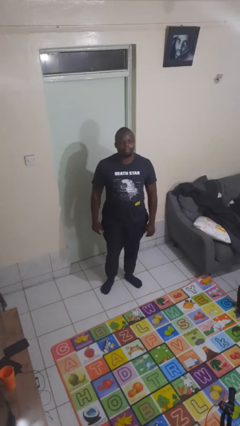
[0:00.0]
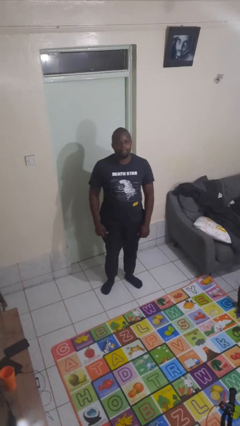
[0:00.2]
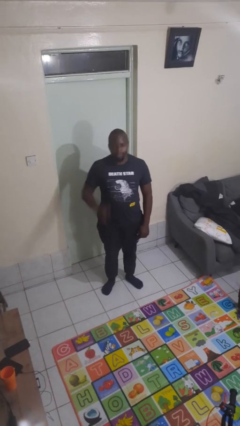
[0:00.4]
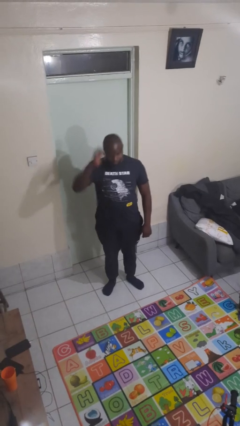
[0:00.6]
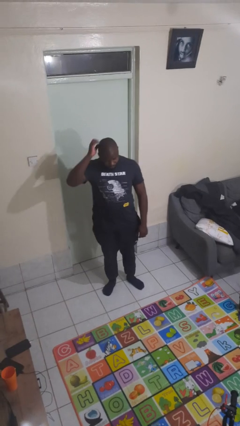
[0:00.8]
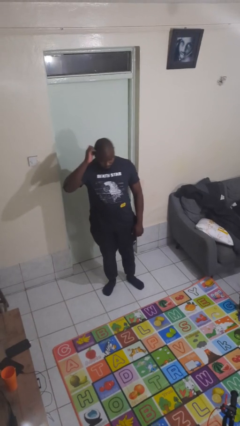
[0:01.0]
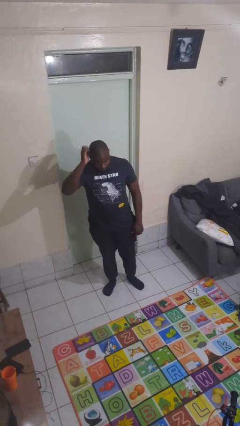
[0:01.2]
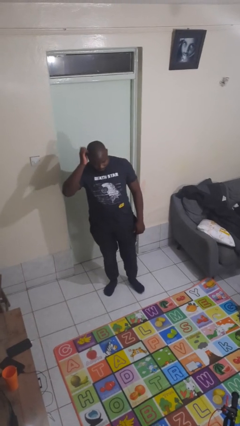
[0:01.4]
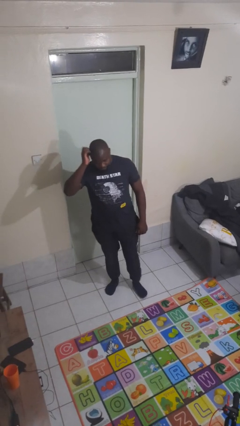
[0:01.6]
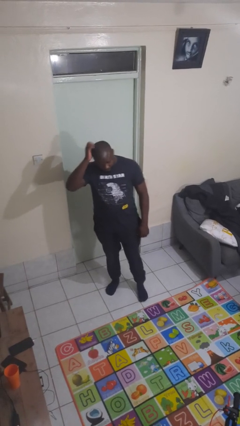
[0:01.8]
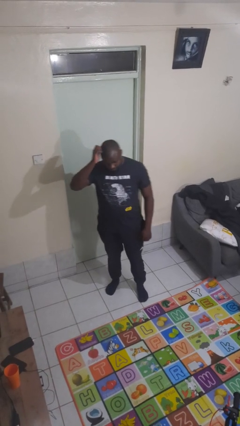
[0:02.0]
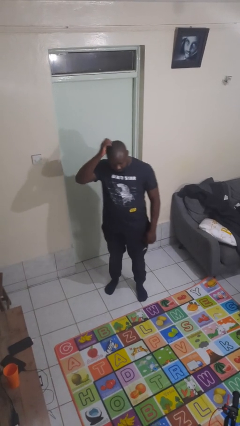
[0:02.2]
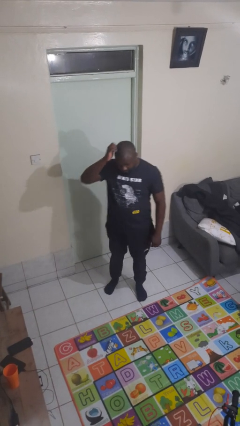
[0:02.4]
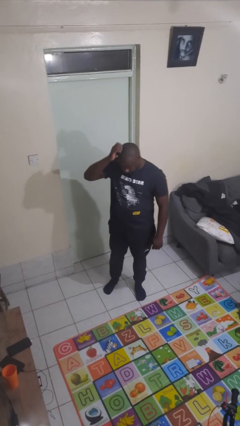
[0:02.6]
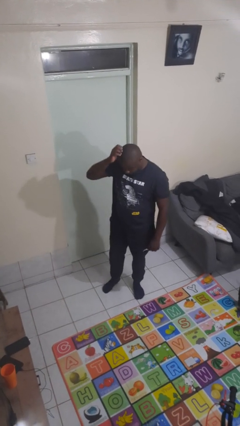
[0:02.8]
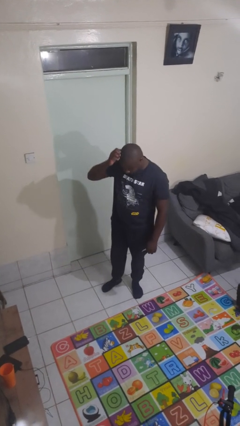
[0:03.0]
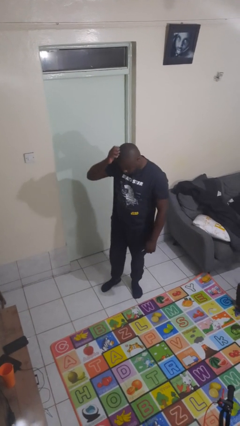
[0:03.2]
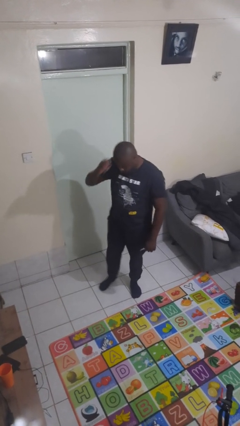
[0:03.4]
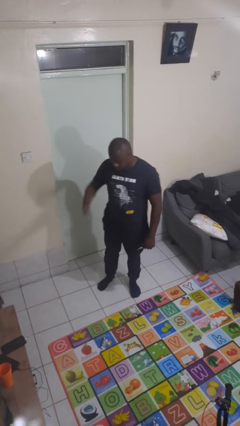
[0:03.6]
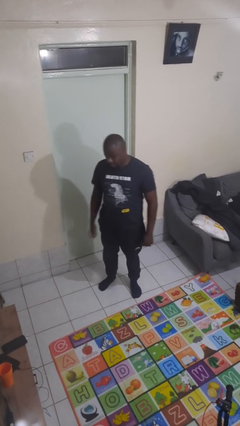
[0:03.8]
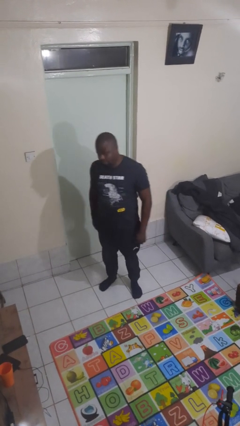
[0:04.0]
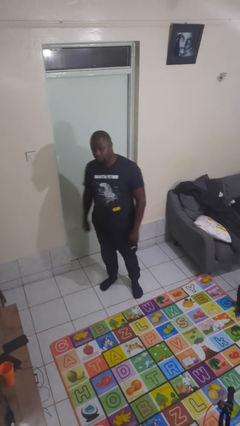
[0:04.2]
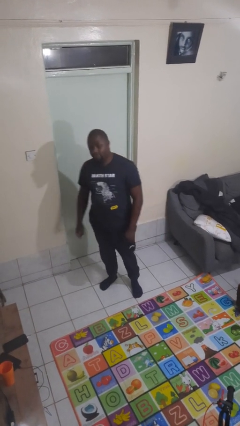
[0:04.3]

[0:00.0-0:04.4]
person scratches face

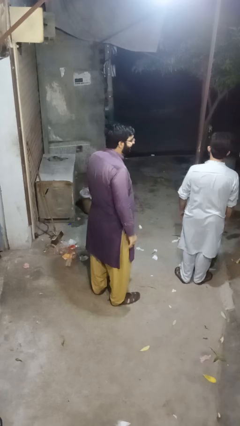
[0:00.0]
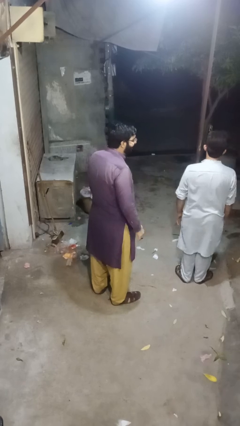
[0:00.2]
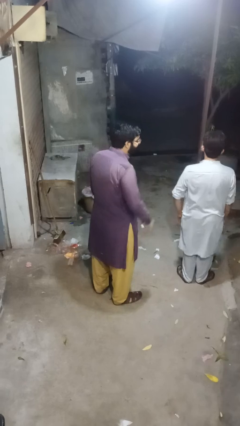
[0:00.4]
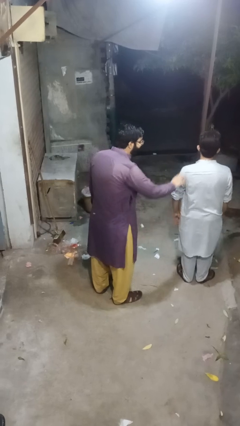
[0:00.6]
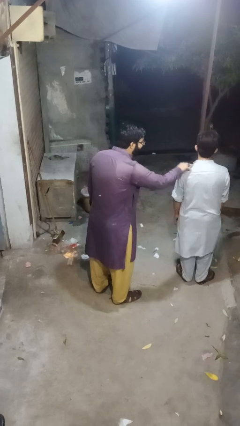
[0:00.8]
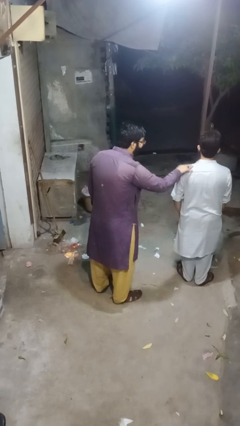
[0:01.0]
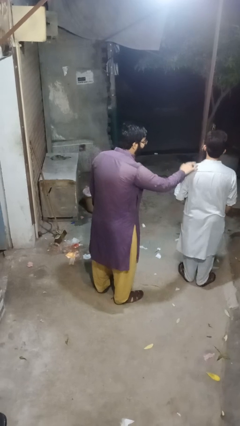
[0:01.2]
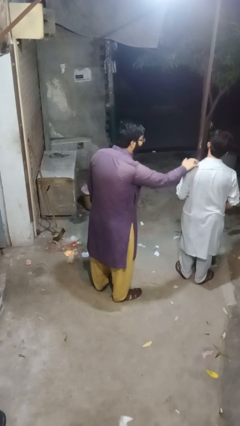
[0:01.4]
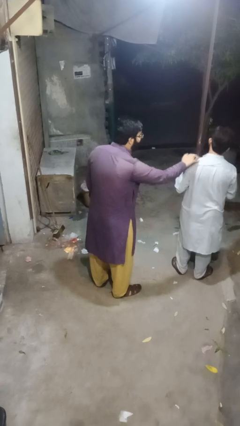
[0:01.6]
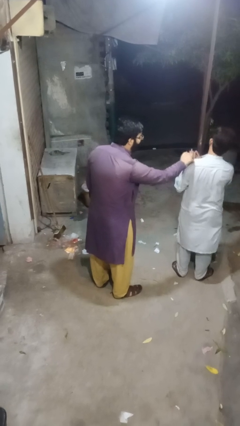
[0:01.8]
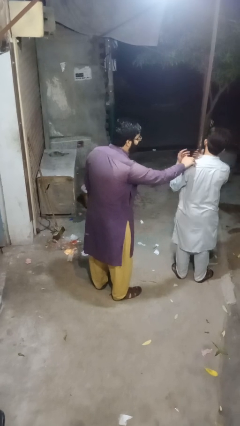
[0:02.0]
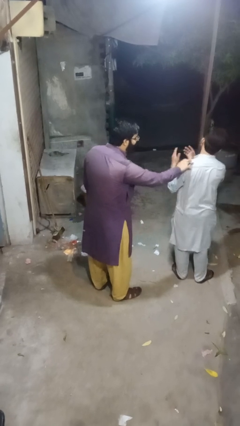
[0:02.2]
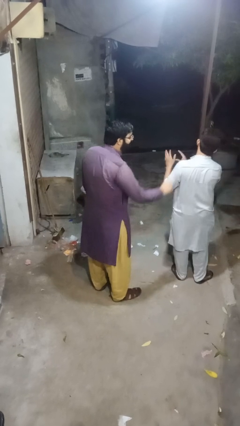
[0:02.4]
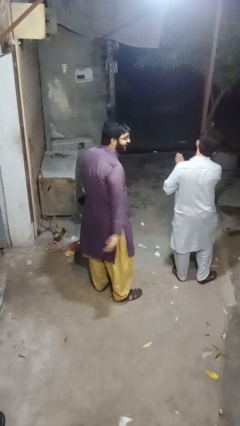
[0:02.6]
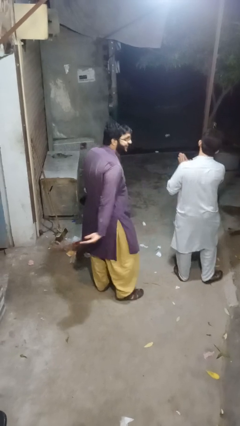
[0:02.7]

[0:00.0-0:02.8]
person touches back of person

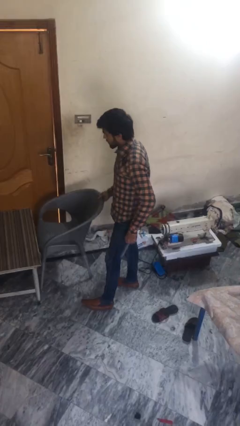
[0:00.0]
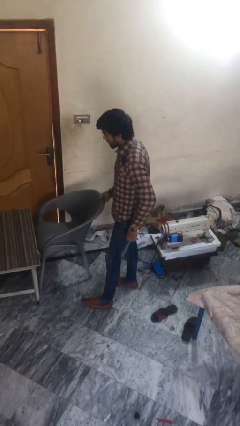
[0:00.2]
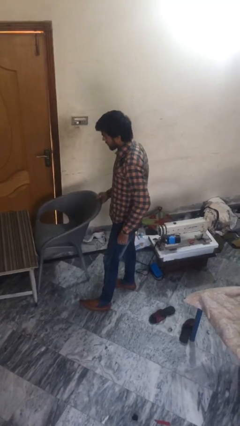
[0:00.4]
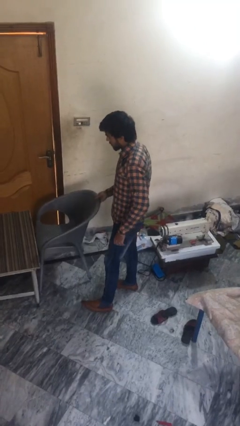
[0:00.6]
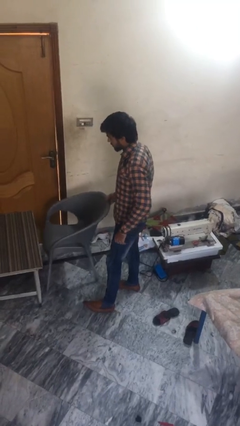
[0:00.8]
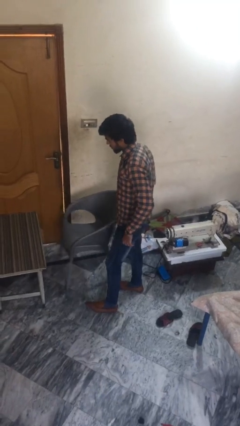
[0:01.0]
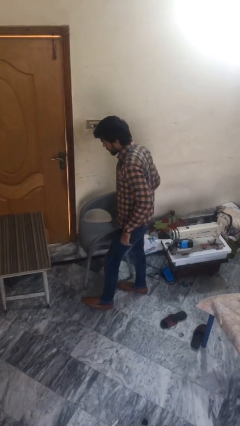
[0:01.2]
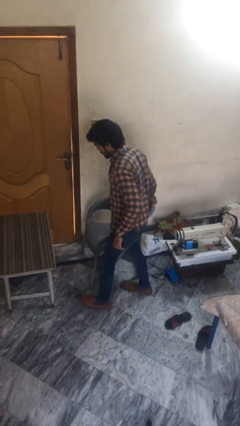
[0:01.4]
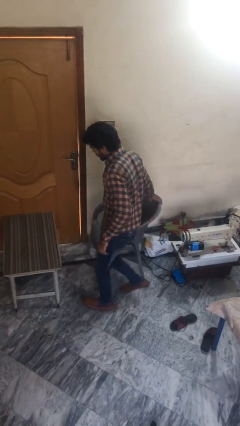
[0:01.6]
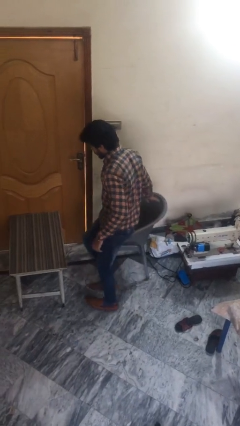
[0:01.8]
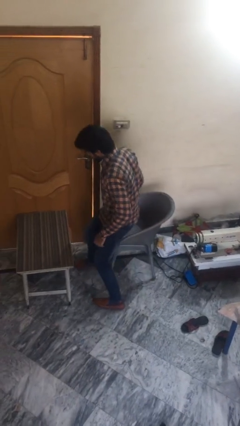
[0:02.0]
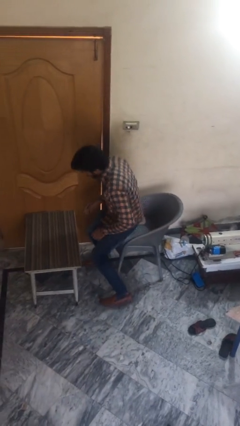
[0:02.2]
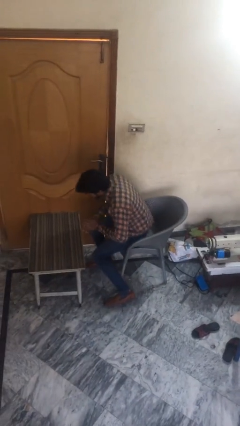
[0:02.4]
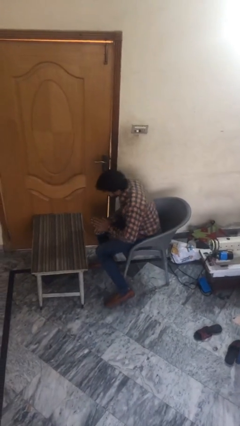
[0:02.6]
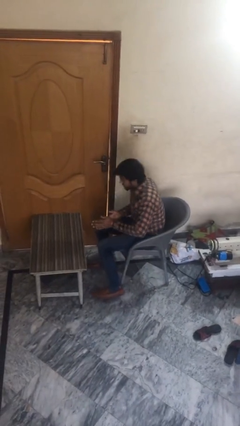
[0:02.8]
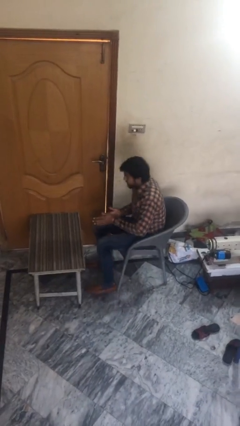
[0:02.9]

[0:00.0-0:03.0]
person sits down

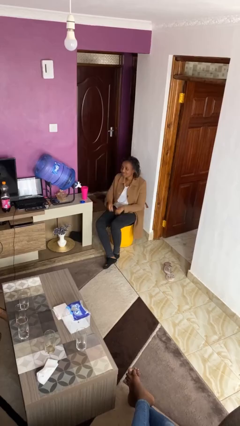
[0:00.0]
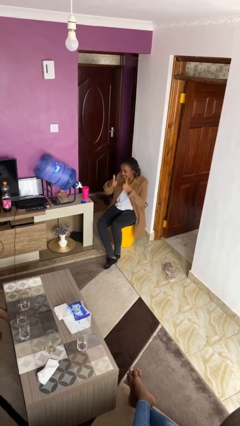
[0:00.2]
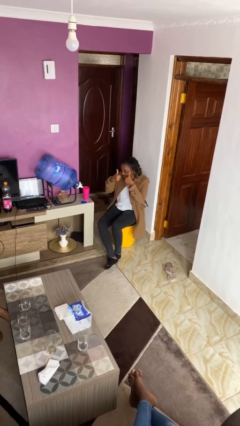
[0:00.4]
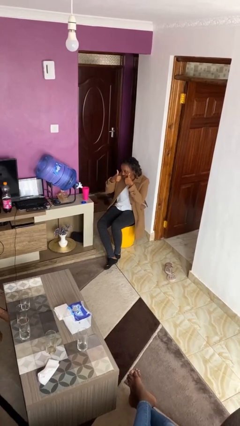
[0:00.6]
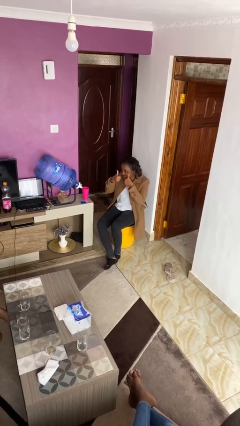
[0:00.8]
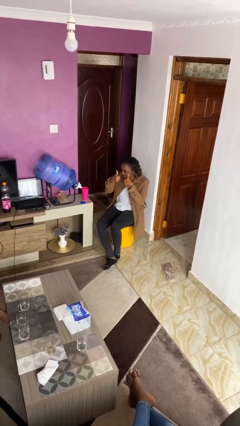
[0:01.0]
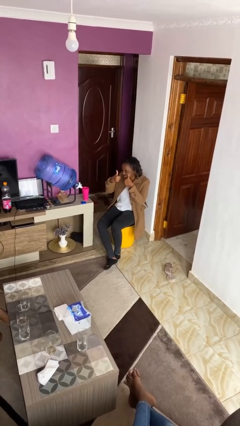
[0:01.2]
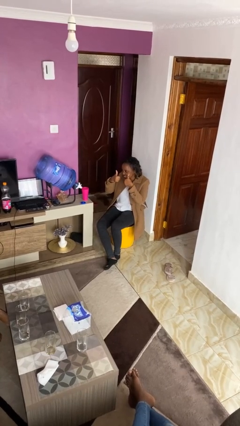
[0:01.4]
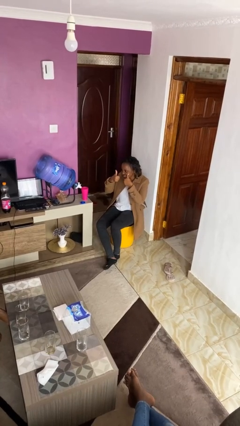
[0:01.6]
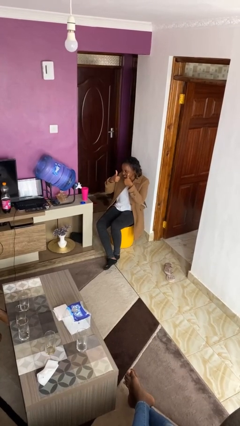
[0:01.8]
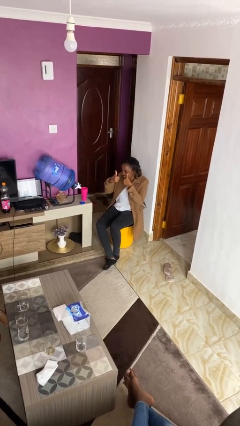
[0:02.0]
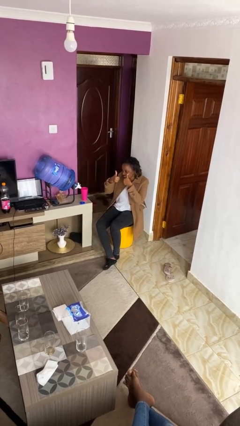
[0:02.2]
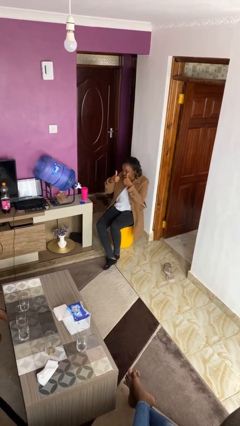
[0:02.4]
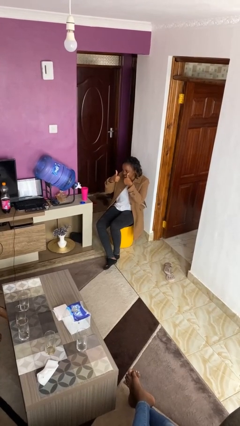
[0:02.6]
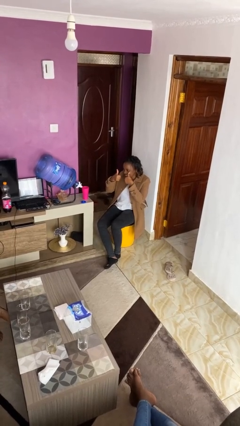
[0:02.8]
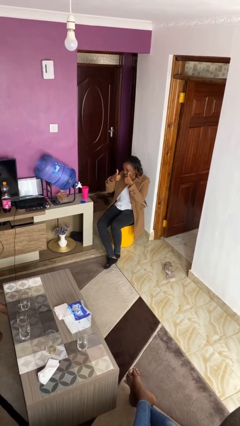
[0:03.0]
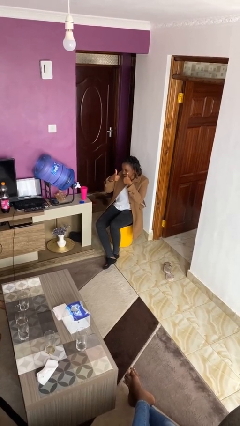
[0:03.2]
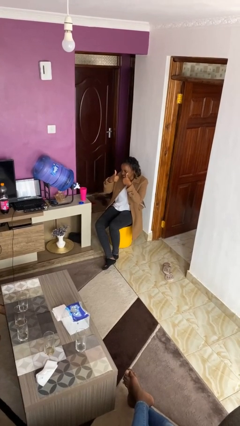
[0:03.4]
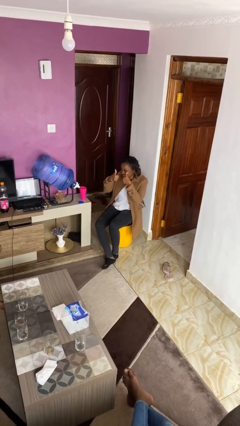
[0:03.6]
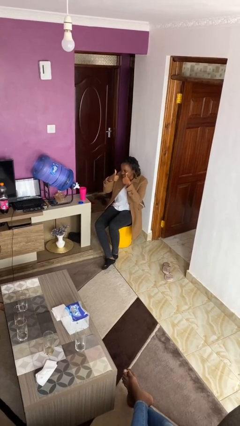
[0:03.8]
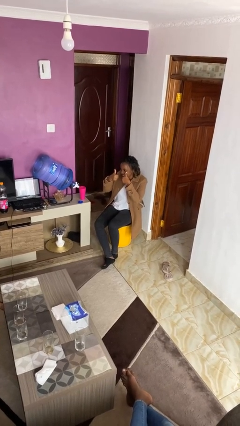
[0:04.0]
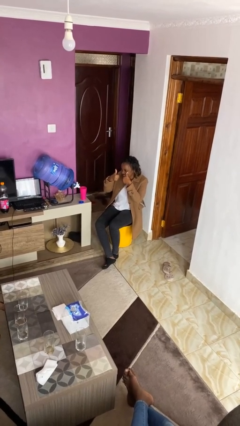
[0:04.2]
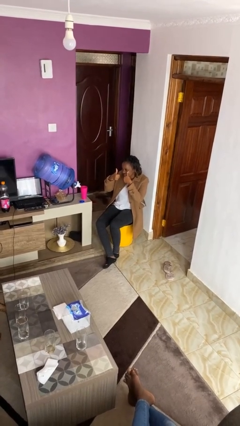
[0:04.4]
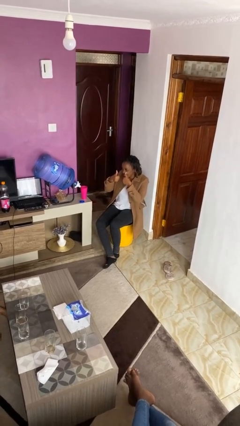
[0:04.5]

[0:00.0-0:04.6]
person gestures thumbs up

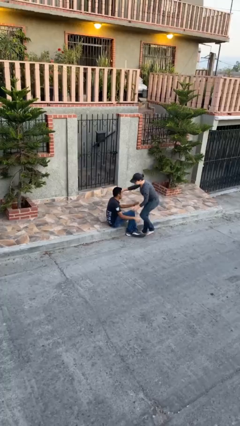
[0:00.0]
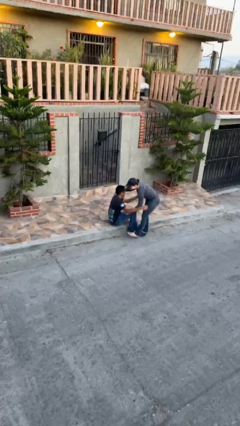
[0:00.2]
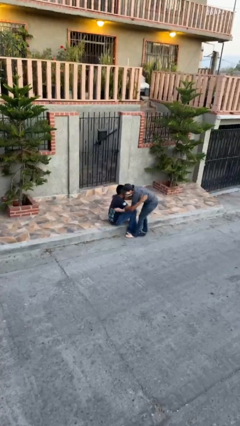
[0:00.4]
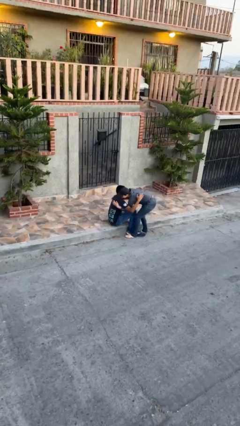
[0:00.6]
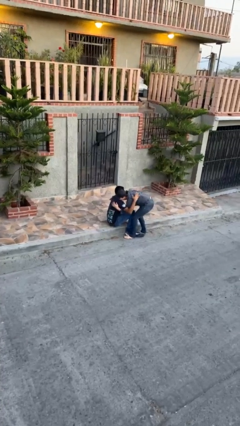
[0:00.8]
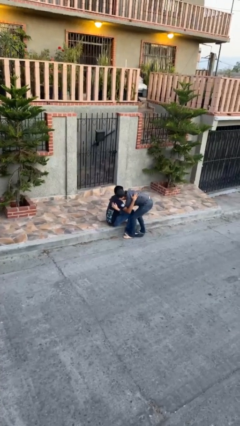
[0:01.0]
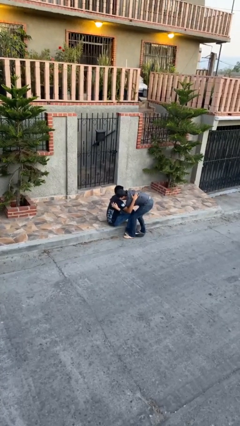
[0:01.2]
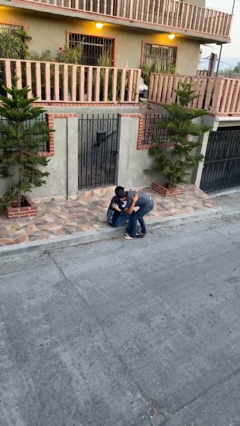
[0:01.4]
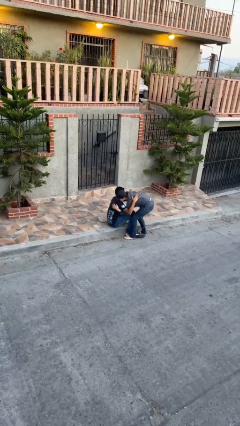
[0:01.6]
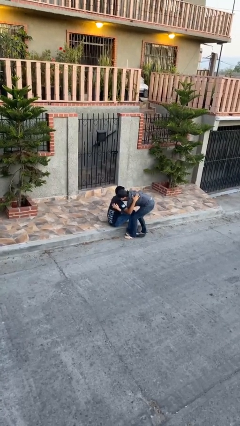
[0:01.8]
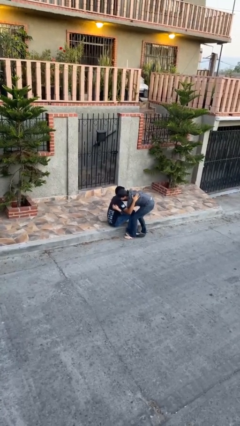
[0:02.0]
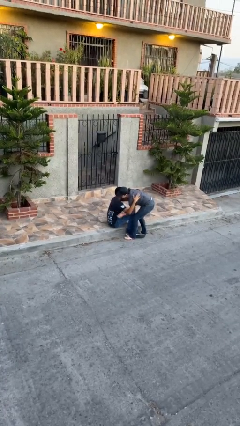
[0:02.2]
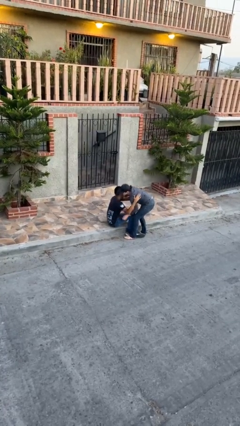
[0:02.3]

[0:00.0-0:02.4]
person embraces person

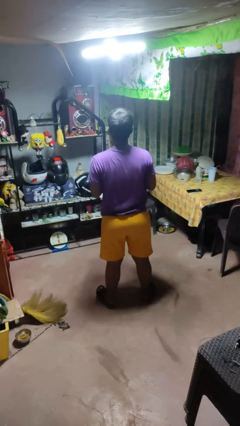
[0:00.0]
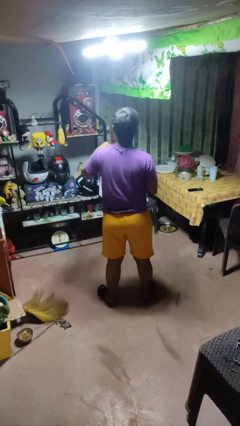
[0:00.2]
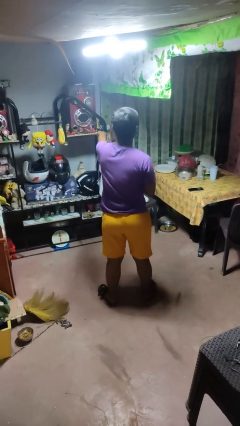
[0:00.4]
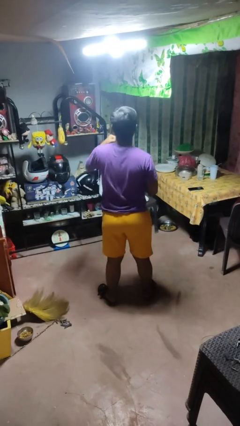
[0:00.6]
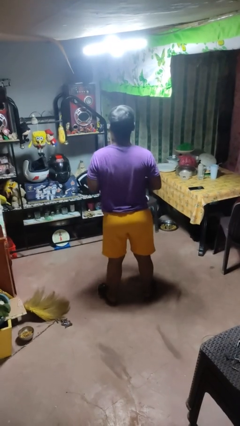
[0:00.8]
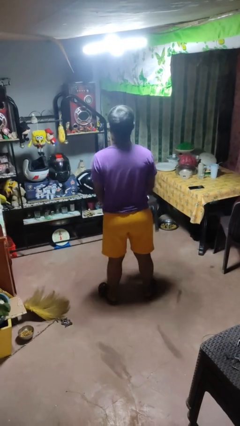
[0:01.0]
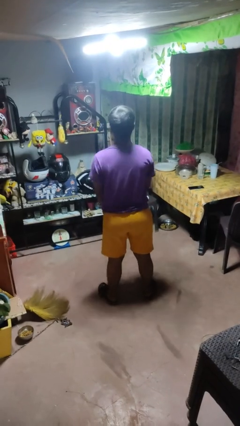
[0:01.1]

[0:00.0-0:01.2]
person punches
